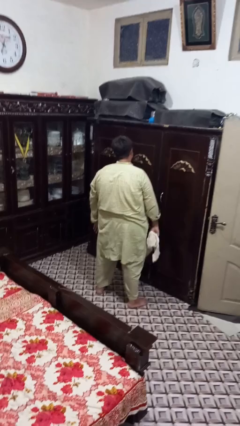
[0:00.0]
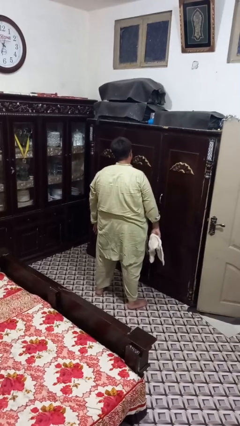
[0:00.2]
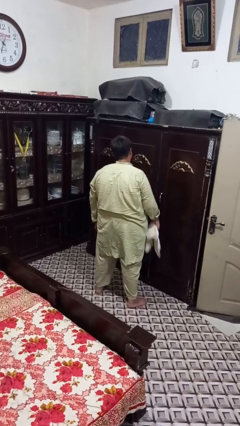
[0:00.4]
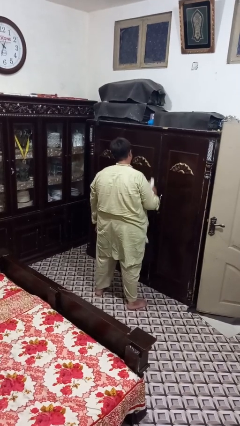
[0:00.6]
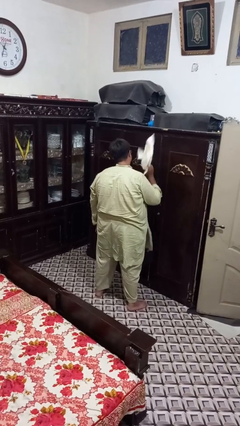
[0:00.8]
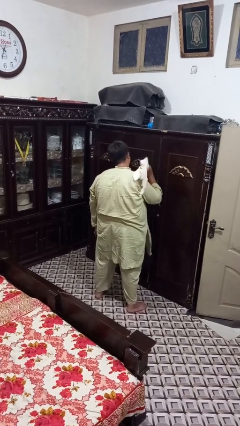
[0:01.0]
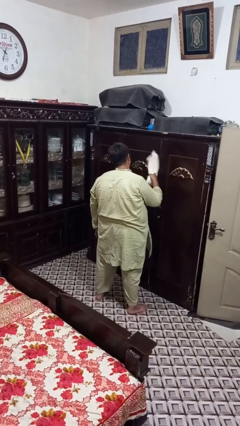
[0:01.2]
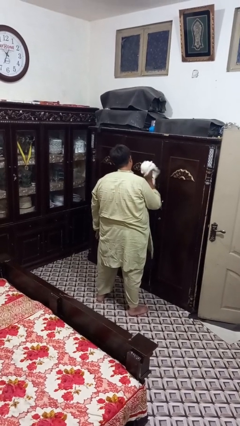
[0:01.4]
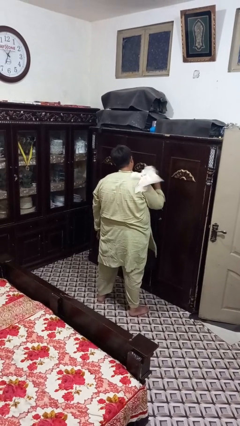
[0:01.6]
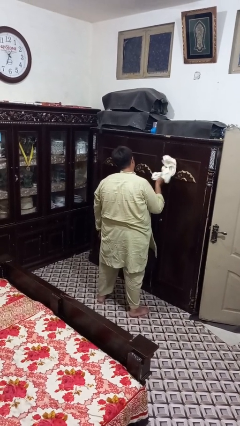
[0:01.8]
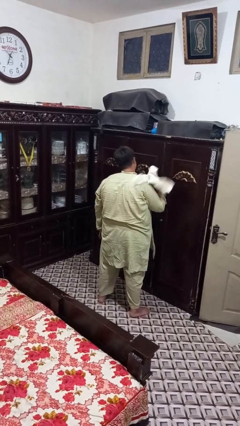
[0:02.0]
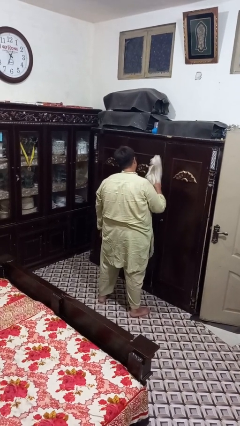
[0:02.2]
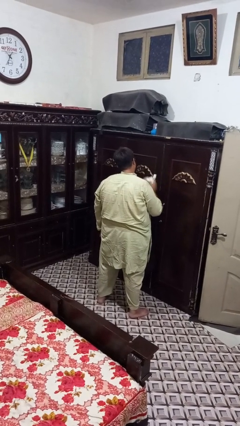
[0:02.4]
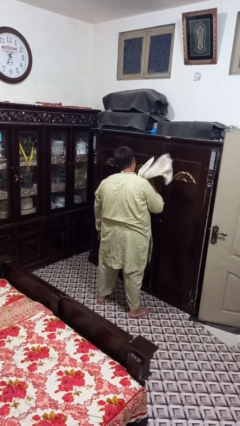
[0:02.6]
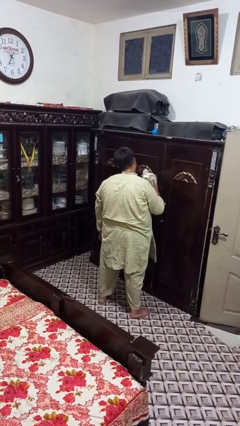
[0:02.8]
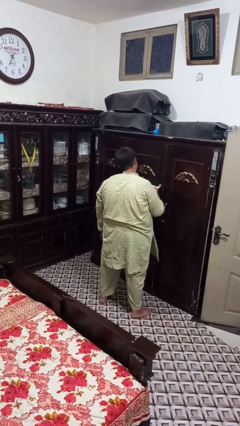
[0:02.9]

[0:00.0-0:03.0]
person dusts furniture

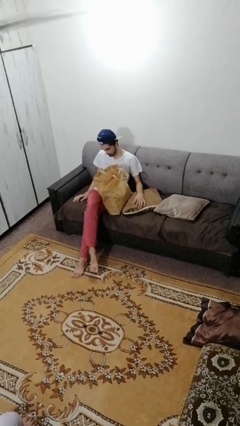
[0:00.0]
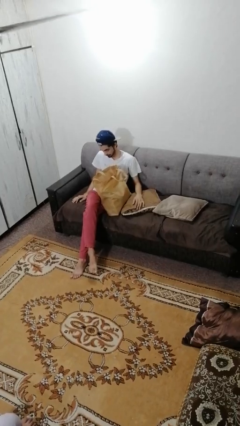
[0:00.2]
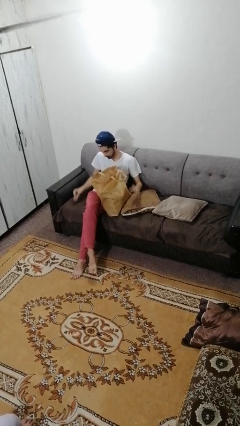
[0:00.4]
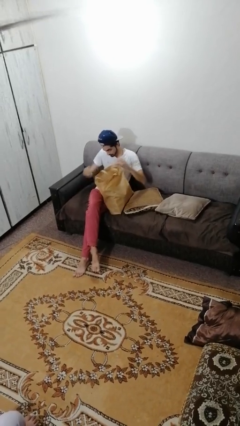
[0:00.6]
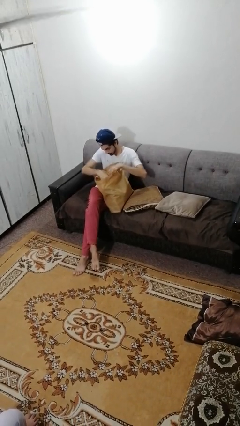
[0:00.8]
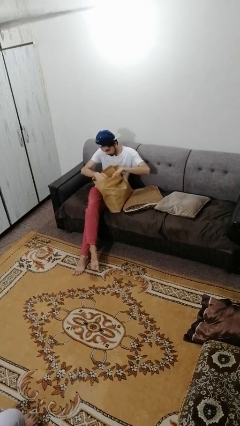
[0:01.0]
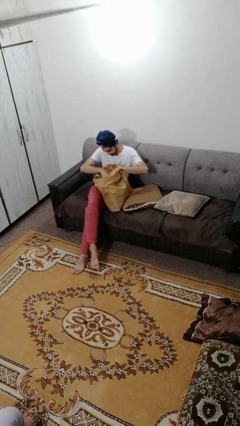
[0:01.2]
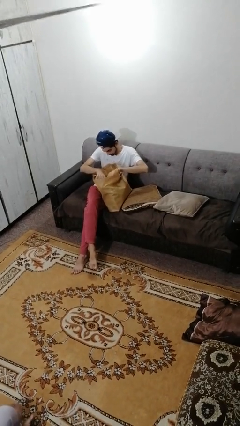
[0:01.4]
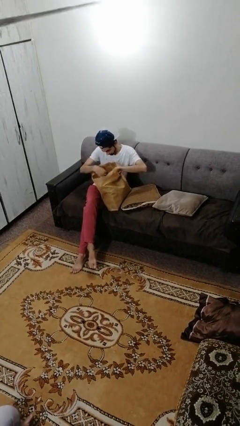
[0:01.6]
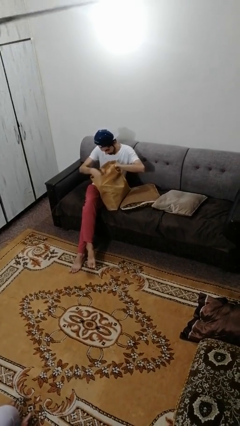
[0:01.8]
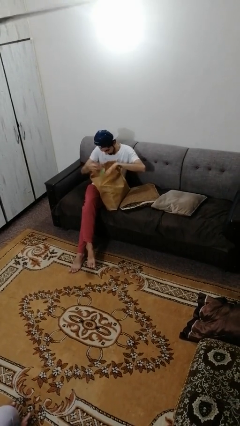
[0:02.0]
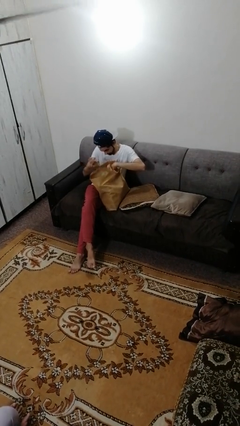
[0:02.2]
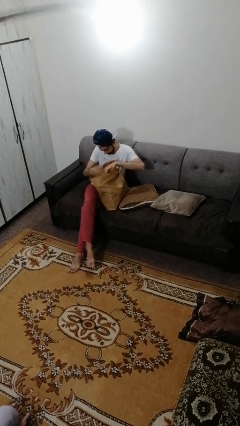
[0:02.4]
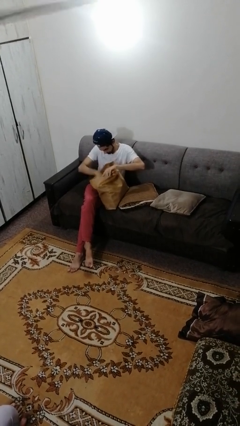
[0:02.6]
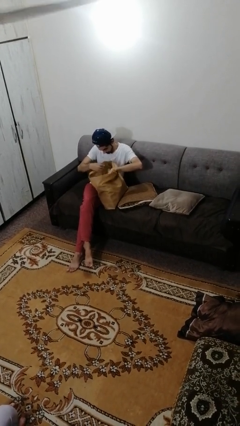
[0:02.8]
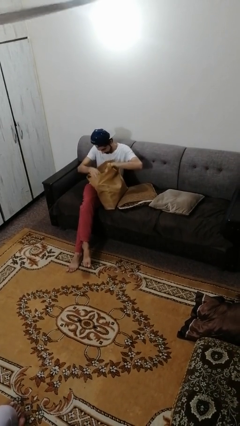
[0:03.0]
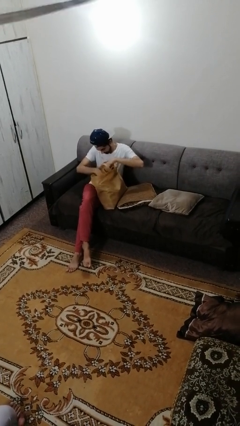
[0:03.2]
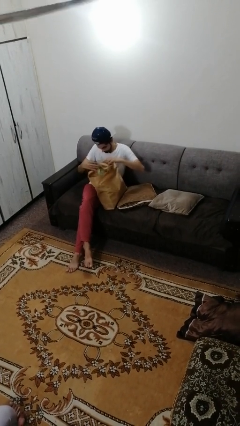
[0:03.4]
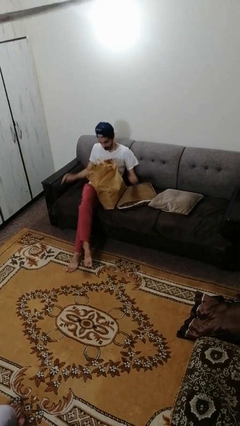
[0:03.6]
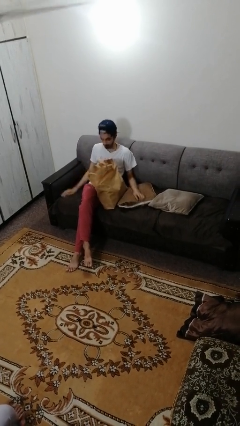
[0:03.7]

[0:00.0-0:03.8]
person searches in bag

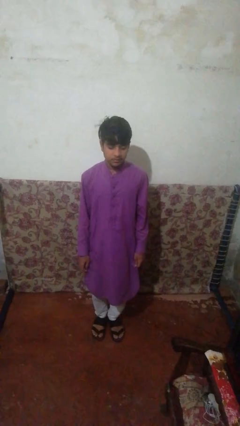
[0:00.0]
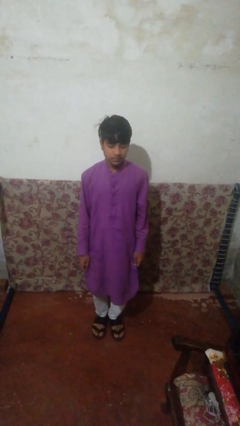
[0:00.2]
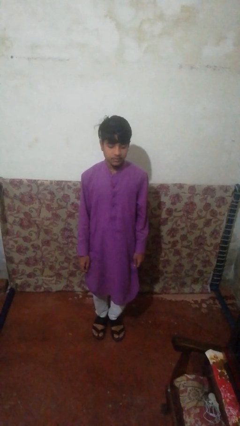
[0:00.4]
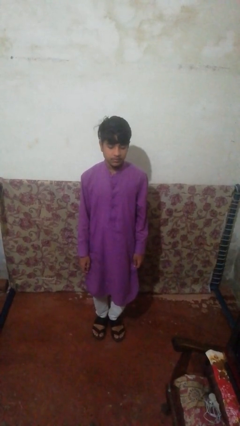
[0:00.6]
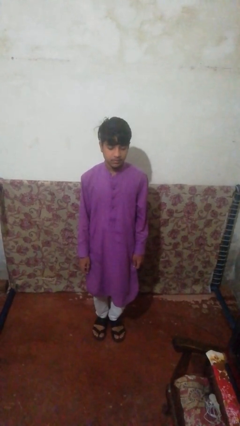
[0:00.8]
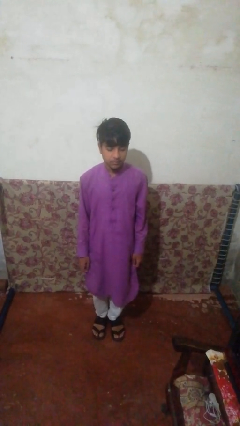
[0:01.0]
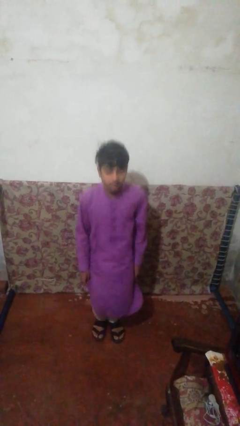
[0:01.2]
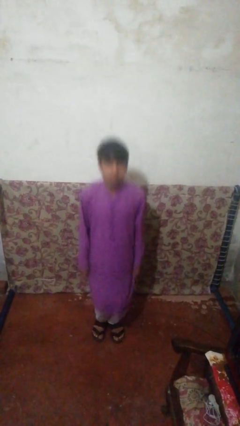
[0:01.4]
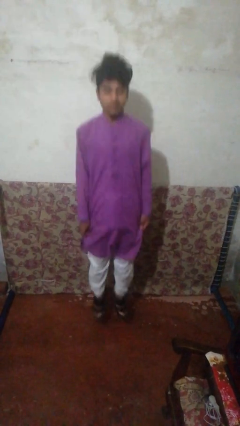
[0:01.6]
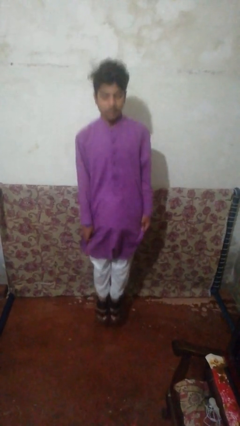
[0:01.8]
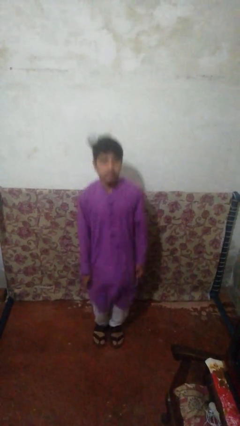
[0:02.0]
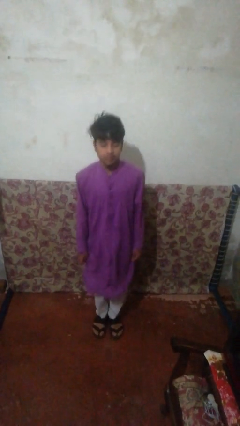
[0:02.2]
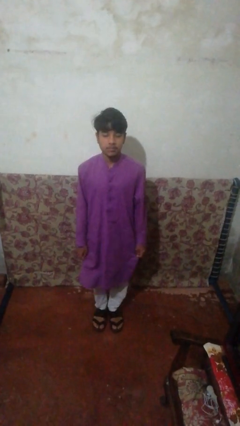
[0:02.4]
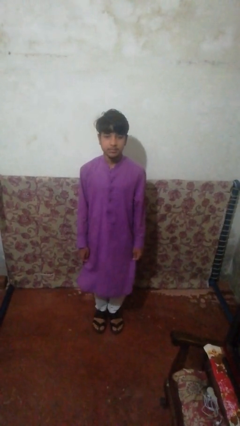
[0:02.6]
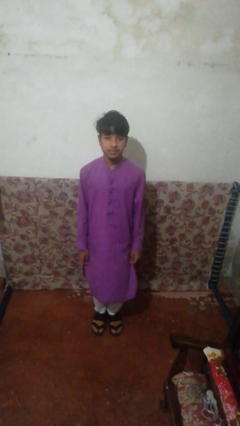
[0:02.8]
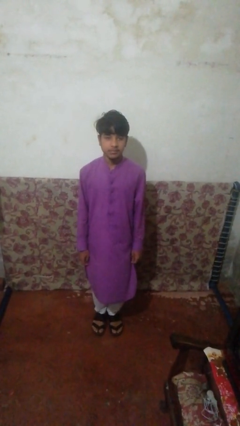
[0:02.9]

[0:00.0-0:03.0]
person jumps

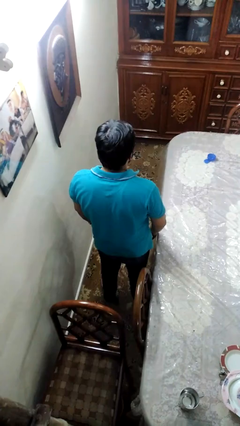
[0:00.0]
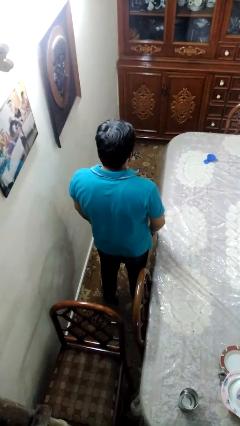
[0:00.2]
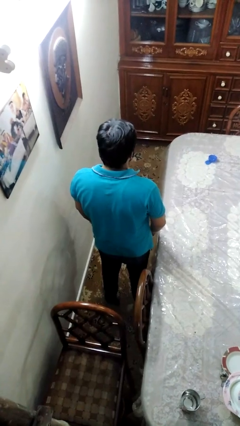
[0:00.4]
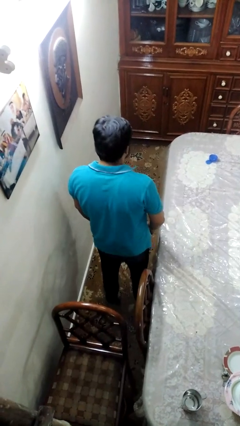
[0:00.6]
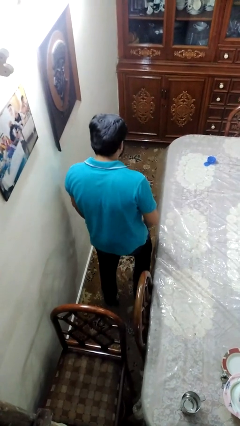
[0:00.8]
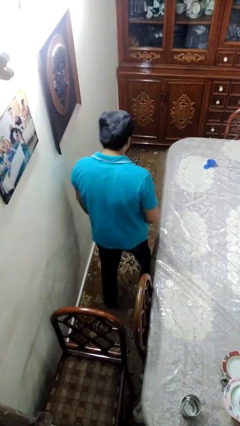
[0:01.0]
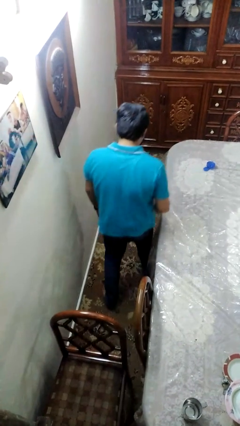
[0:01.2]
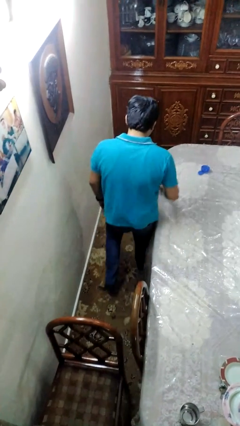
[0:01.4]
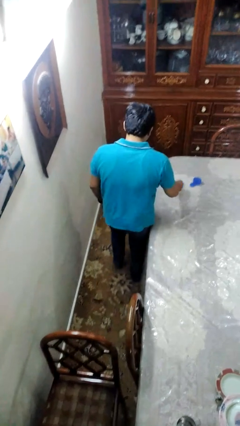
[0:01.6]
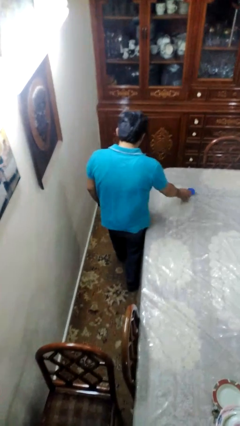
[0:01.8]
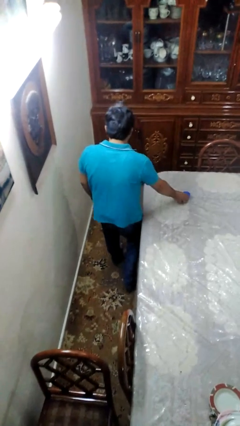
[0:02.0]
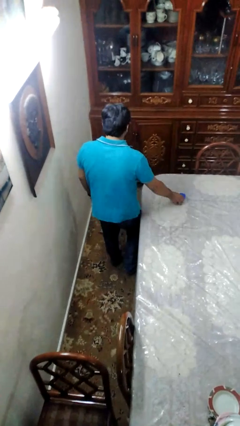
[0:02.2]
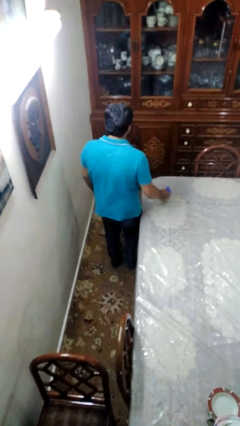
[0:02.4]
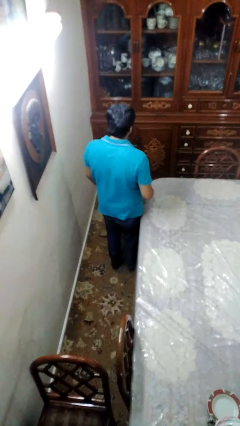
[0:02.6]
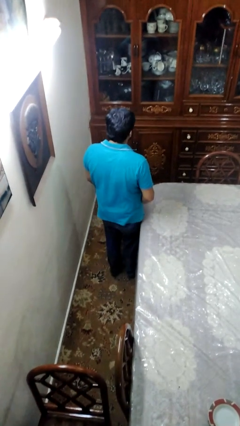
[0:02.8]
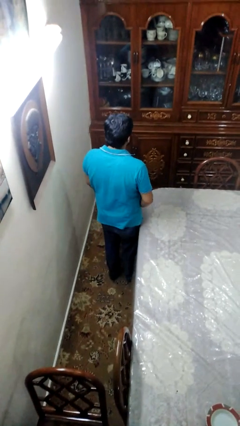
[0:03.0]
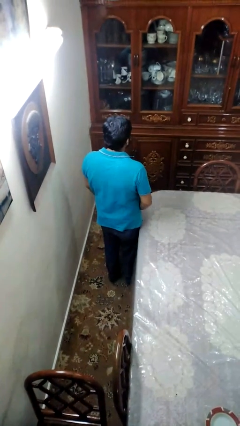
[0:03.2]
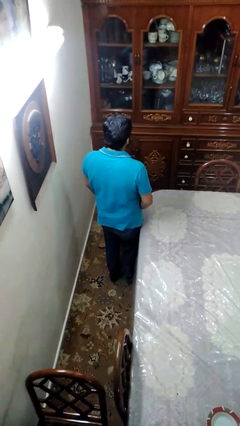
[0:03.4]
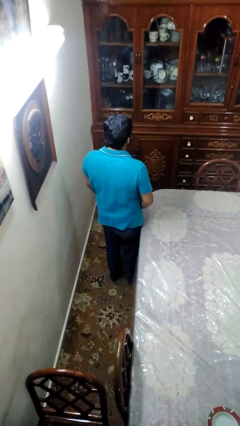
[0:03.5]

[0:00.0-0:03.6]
person picks up object from table

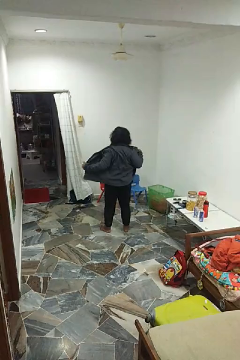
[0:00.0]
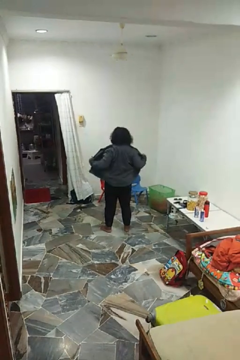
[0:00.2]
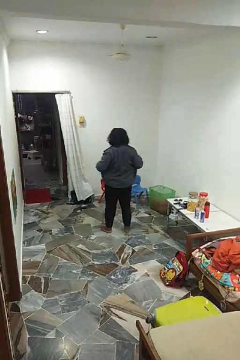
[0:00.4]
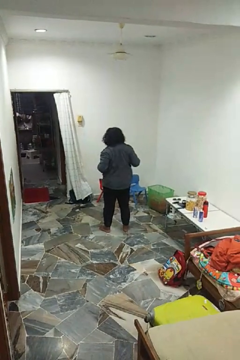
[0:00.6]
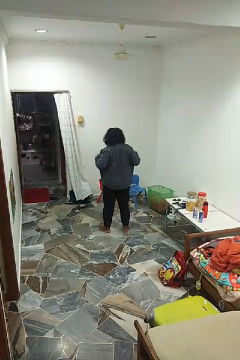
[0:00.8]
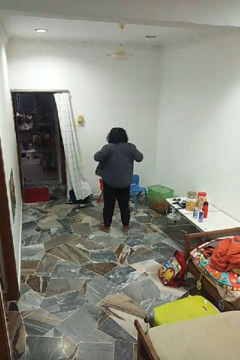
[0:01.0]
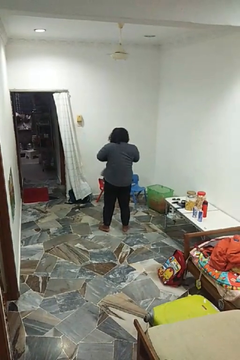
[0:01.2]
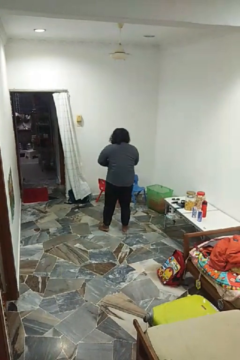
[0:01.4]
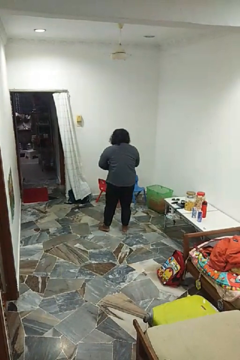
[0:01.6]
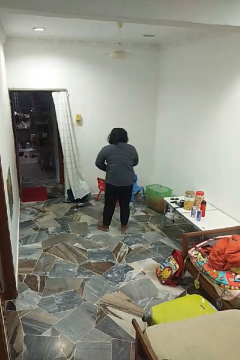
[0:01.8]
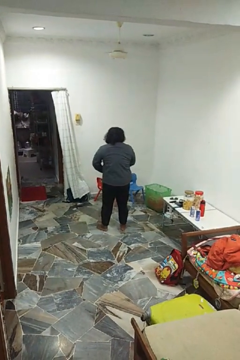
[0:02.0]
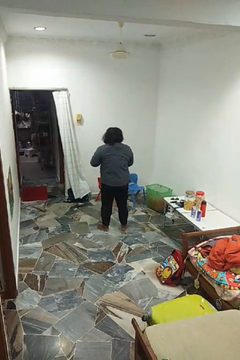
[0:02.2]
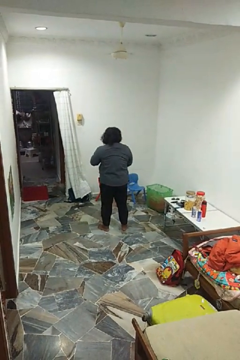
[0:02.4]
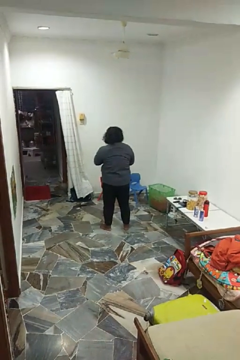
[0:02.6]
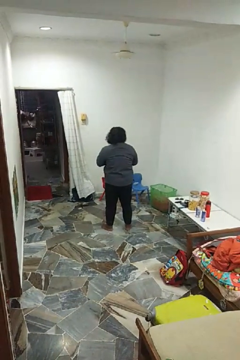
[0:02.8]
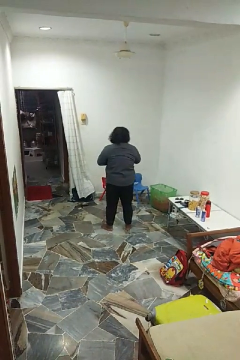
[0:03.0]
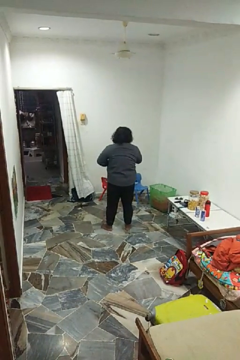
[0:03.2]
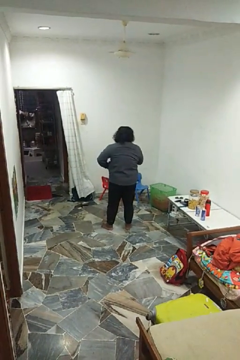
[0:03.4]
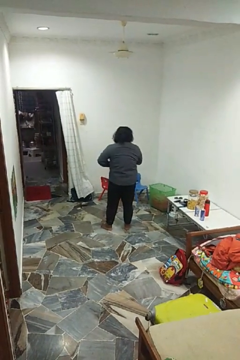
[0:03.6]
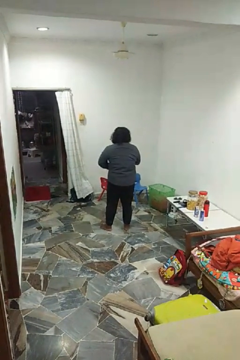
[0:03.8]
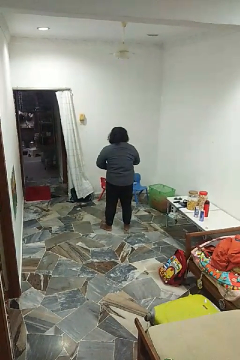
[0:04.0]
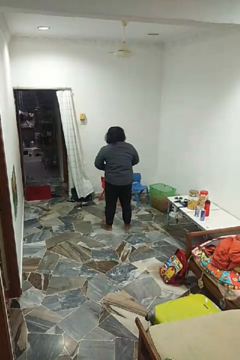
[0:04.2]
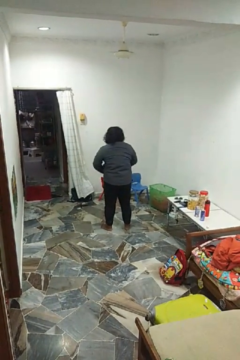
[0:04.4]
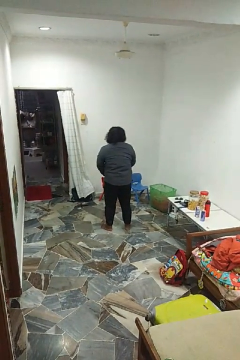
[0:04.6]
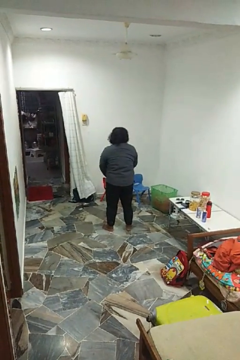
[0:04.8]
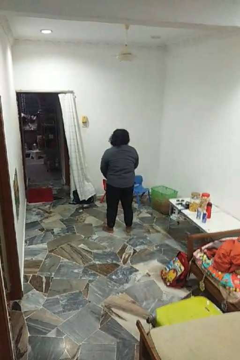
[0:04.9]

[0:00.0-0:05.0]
person buttons shirt
